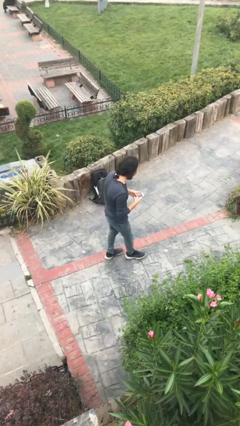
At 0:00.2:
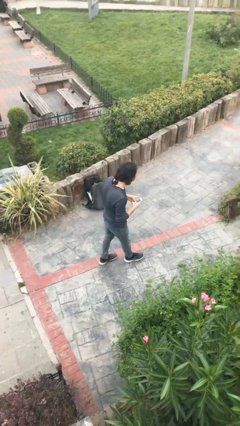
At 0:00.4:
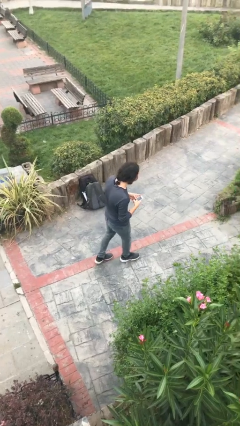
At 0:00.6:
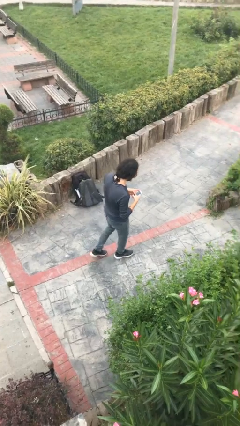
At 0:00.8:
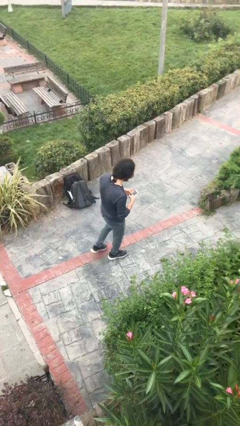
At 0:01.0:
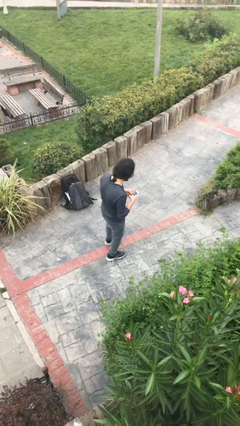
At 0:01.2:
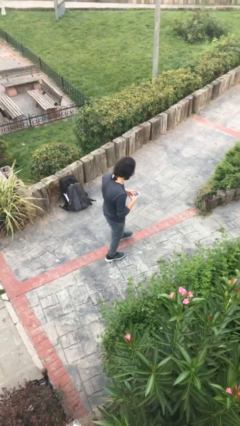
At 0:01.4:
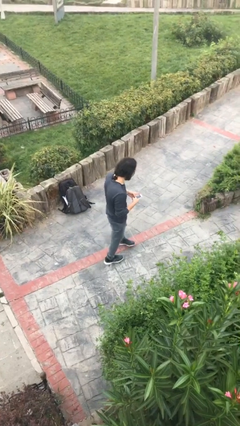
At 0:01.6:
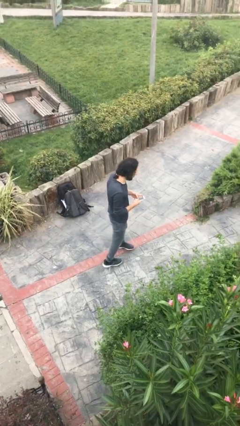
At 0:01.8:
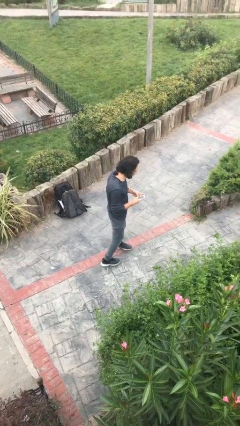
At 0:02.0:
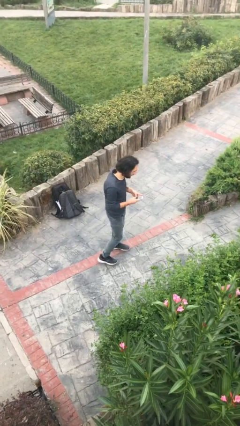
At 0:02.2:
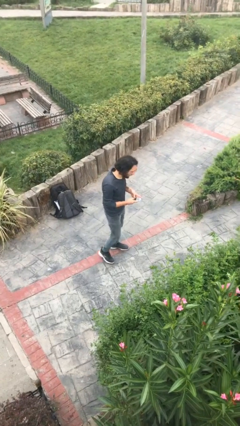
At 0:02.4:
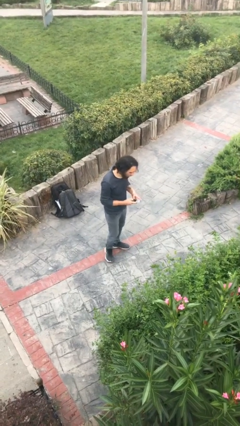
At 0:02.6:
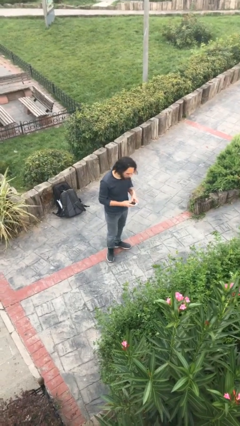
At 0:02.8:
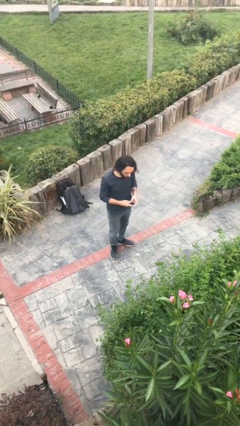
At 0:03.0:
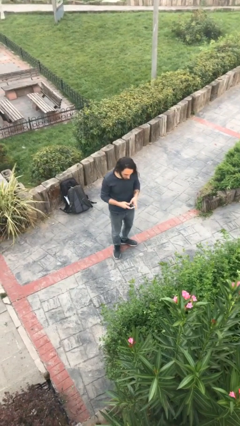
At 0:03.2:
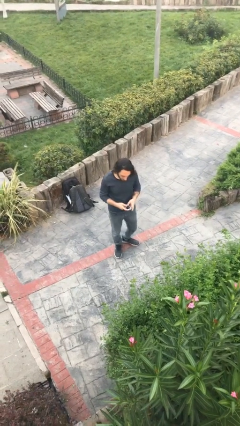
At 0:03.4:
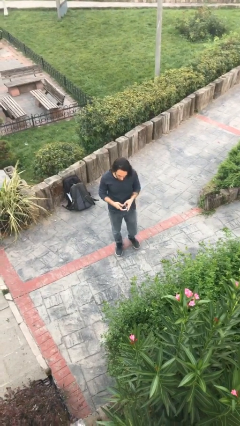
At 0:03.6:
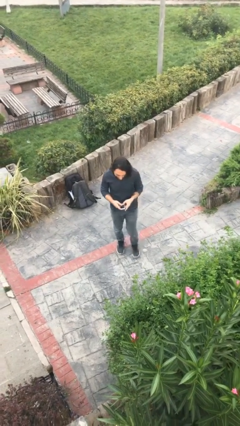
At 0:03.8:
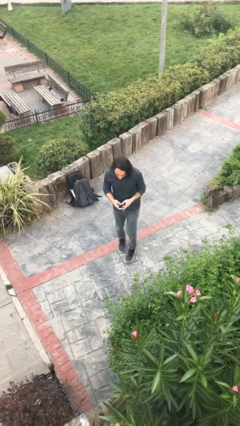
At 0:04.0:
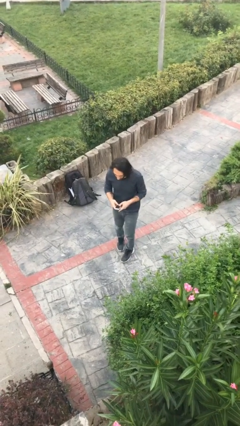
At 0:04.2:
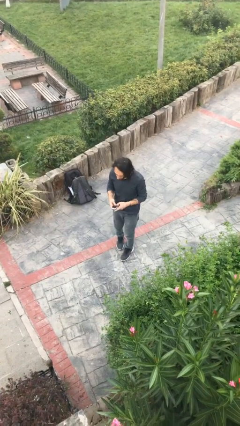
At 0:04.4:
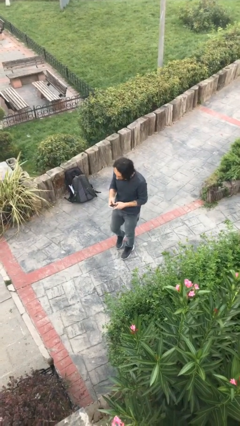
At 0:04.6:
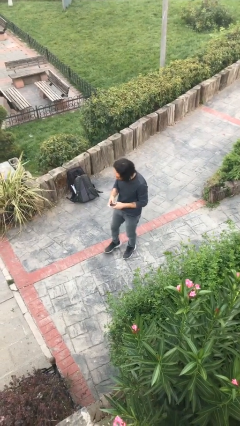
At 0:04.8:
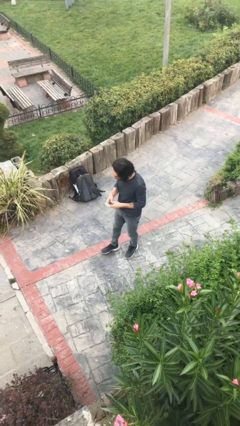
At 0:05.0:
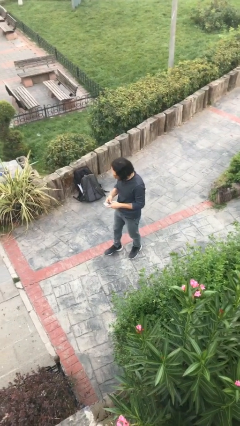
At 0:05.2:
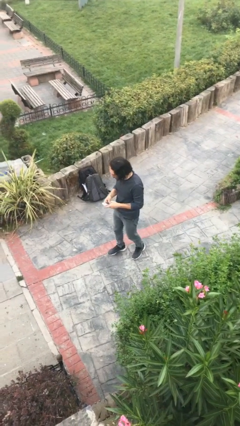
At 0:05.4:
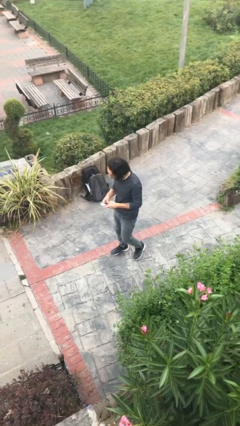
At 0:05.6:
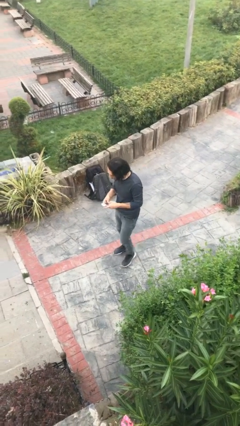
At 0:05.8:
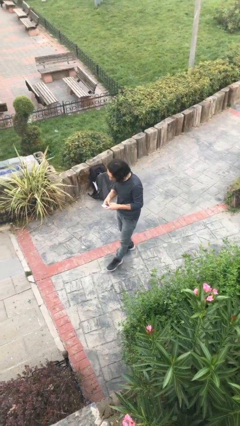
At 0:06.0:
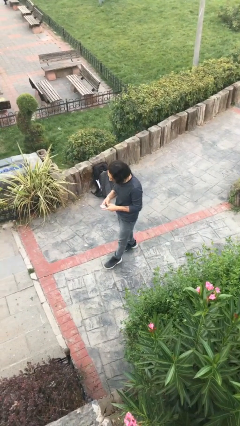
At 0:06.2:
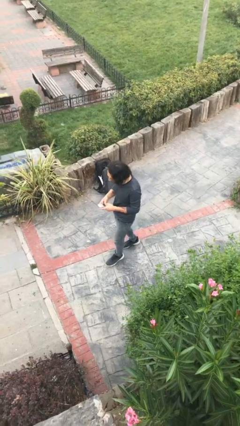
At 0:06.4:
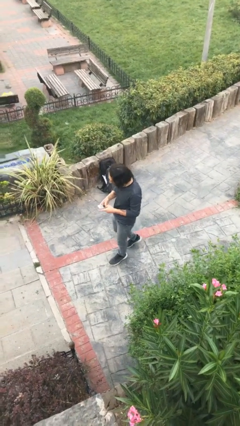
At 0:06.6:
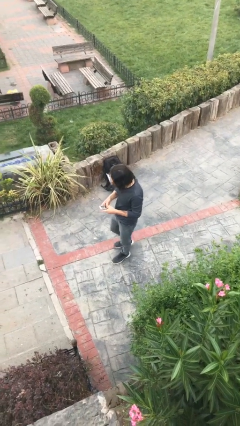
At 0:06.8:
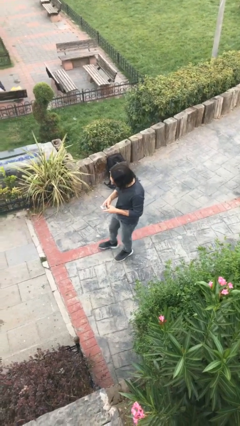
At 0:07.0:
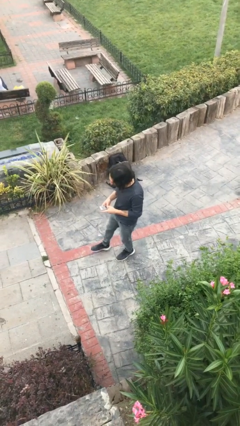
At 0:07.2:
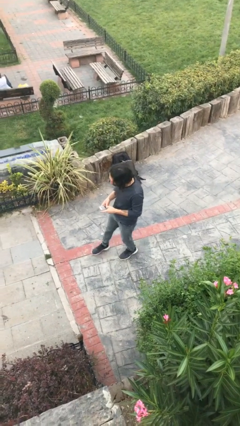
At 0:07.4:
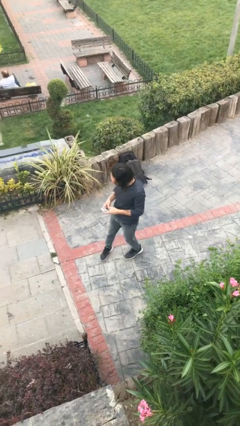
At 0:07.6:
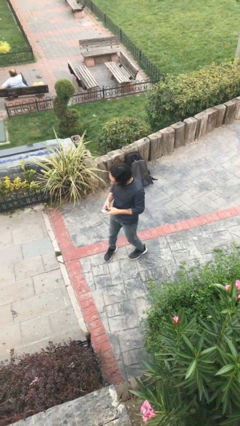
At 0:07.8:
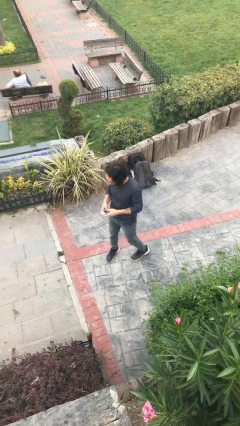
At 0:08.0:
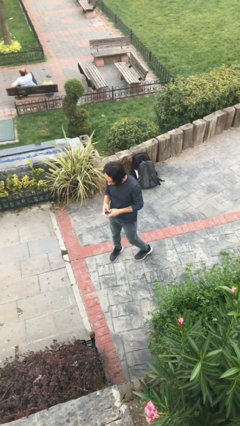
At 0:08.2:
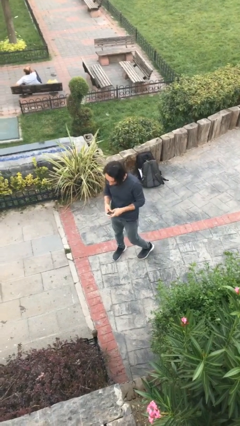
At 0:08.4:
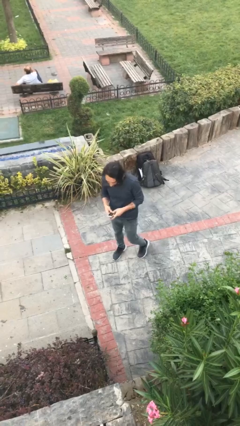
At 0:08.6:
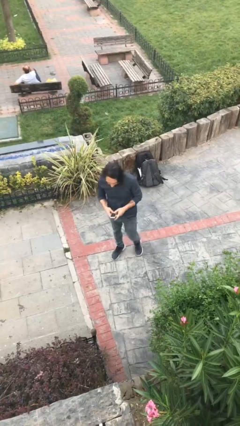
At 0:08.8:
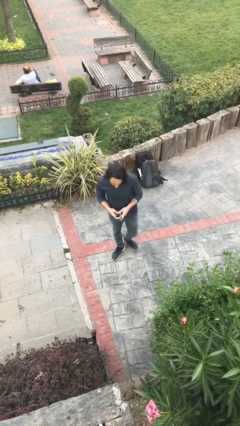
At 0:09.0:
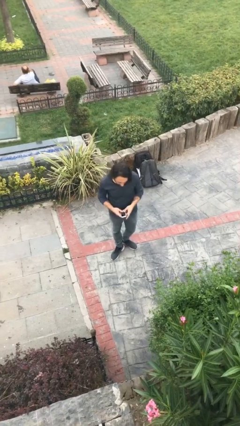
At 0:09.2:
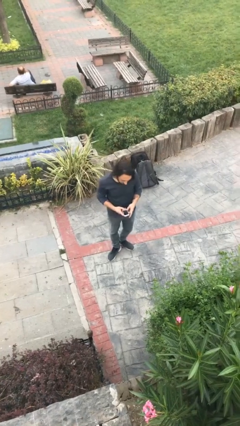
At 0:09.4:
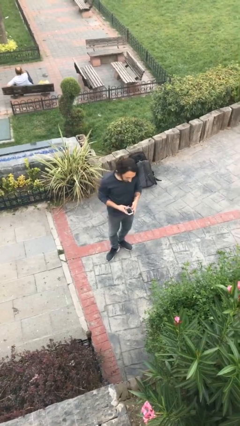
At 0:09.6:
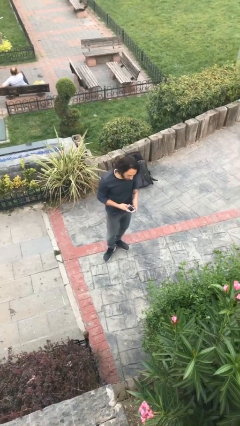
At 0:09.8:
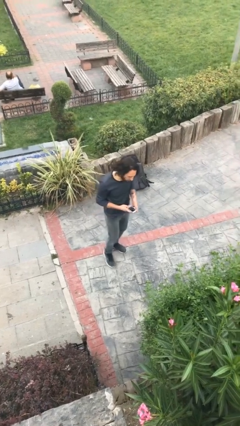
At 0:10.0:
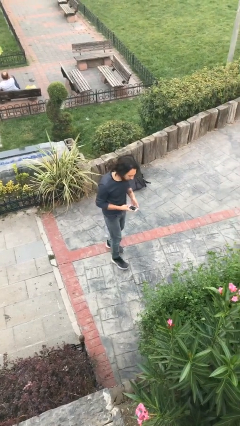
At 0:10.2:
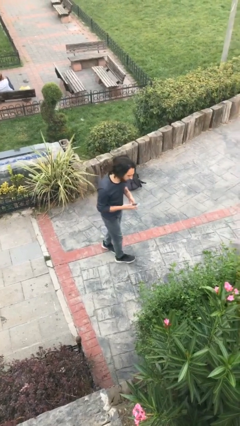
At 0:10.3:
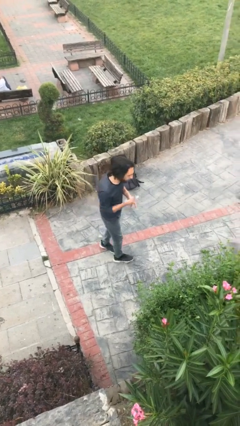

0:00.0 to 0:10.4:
person texts on phone

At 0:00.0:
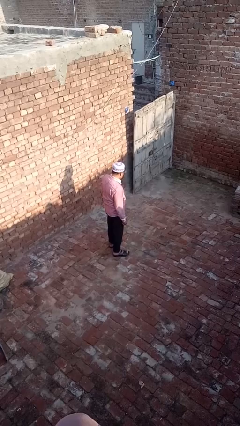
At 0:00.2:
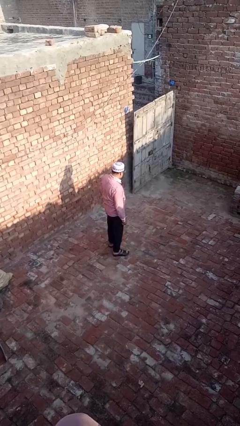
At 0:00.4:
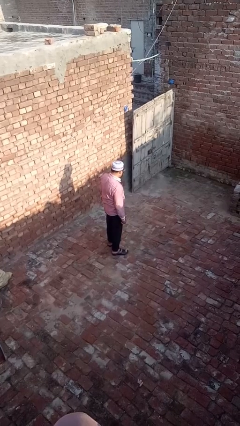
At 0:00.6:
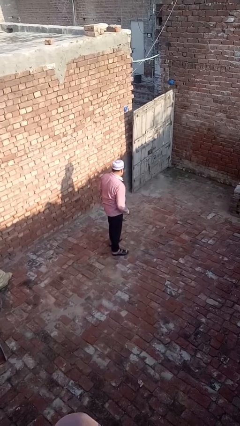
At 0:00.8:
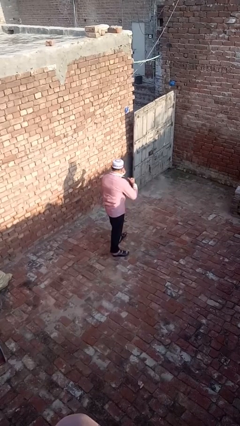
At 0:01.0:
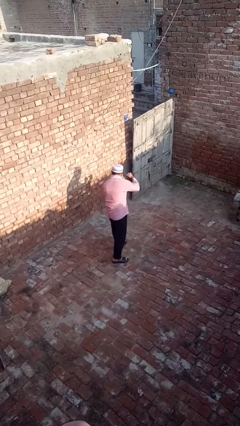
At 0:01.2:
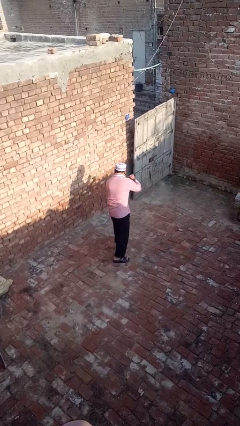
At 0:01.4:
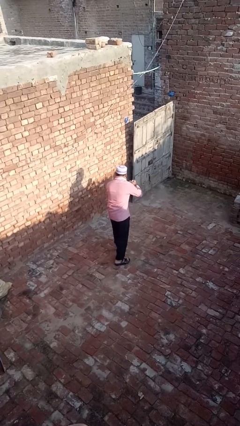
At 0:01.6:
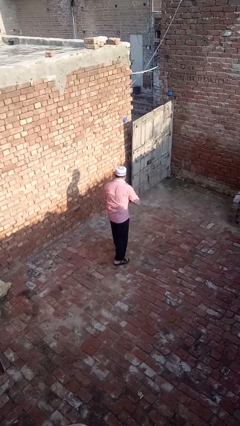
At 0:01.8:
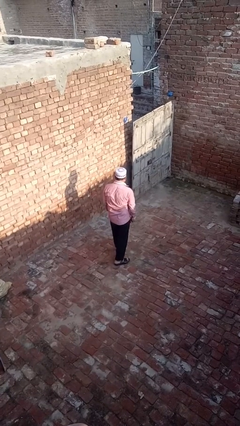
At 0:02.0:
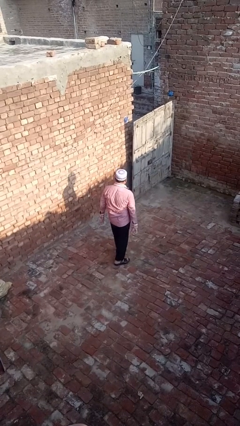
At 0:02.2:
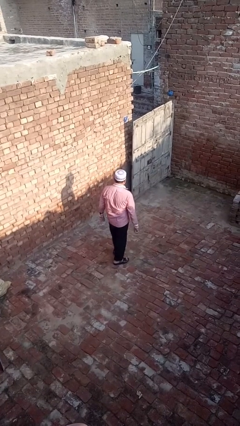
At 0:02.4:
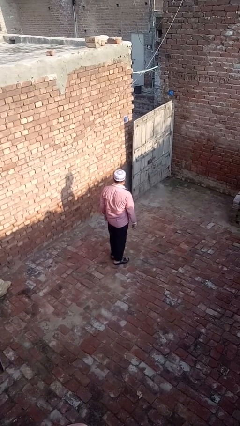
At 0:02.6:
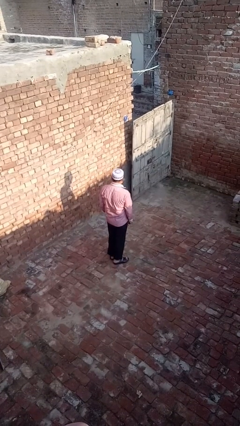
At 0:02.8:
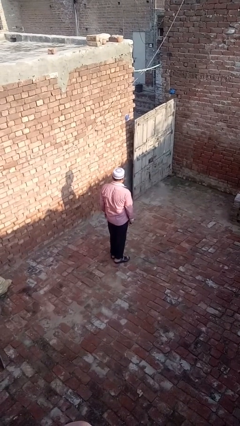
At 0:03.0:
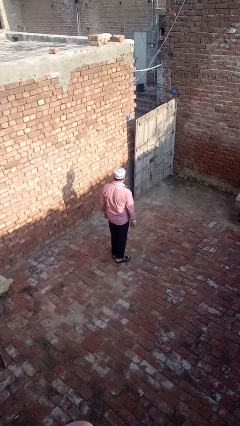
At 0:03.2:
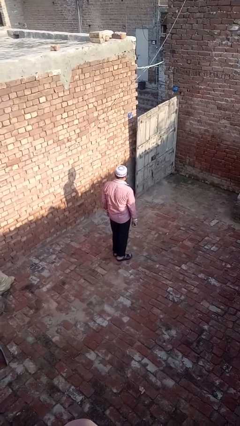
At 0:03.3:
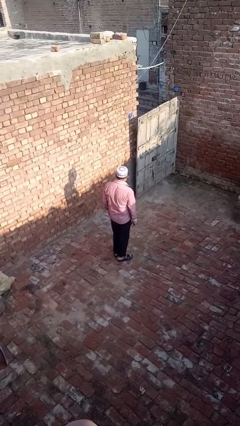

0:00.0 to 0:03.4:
person karate chop

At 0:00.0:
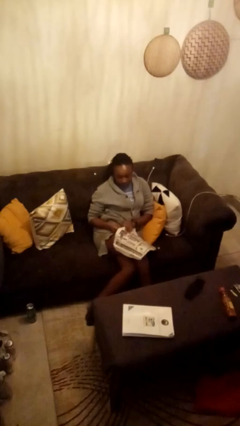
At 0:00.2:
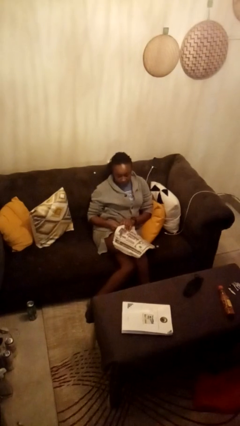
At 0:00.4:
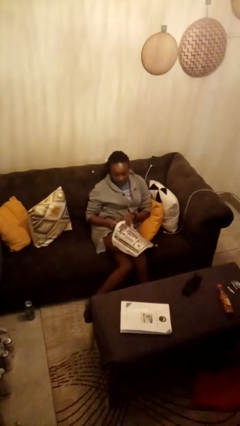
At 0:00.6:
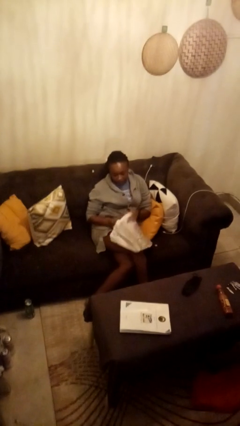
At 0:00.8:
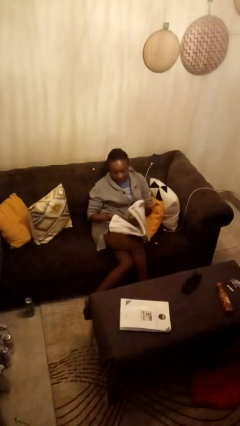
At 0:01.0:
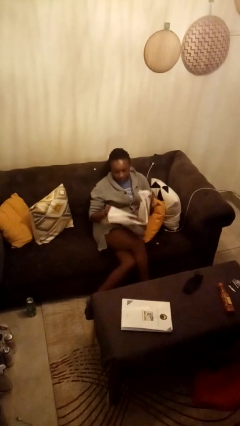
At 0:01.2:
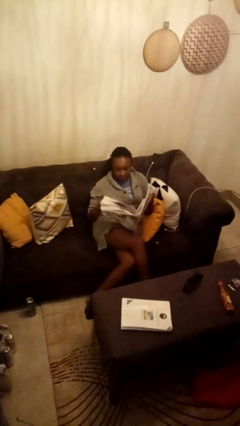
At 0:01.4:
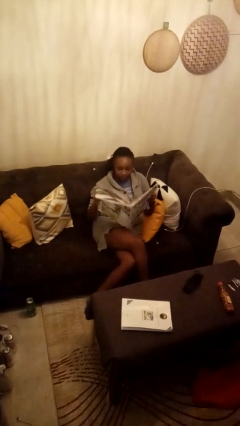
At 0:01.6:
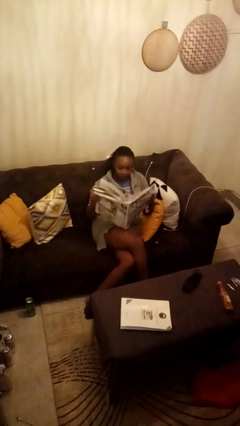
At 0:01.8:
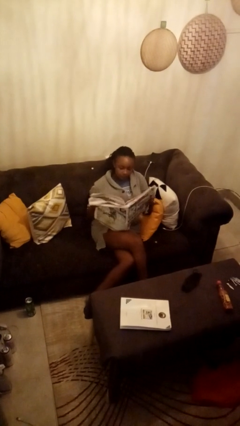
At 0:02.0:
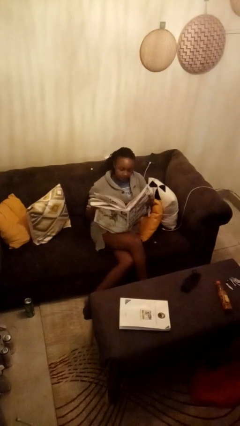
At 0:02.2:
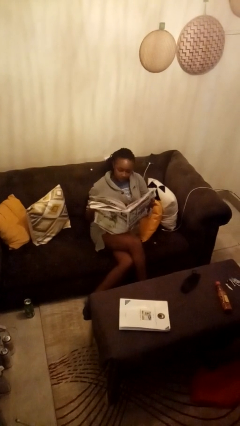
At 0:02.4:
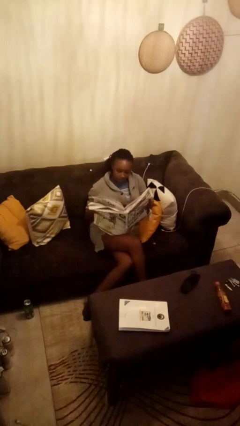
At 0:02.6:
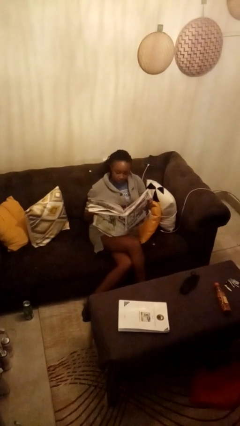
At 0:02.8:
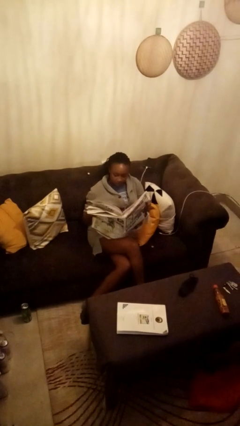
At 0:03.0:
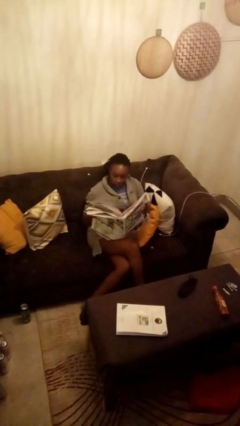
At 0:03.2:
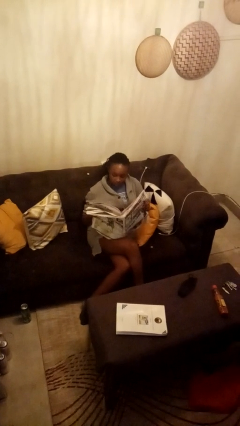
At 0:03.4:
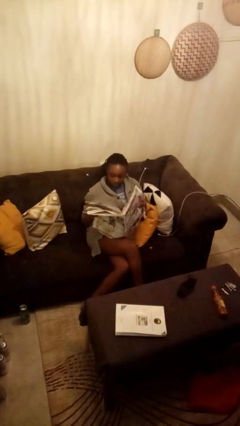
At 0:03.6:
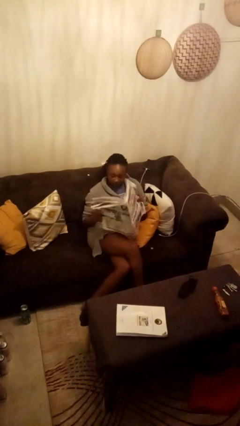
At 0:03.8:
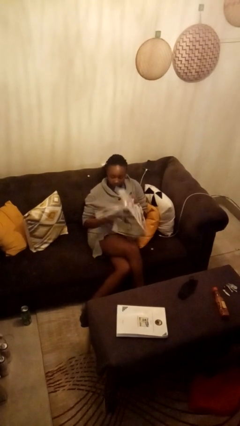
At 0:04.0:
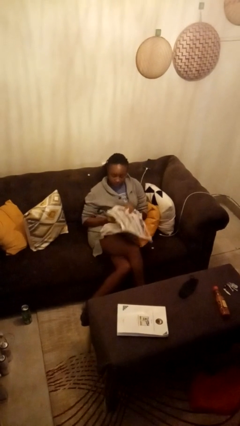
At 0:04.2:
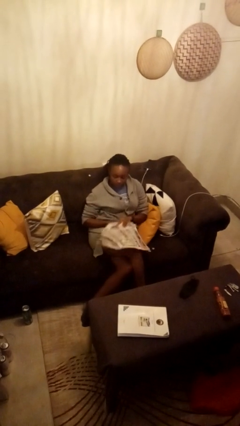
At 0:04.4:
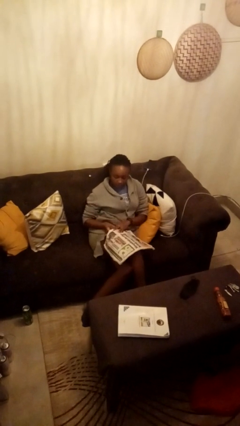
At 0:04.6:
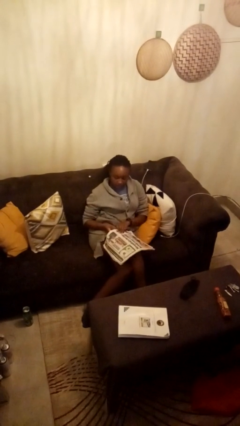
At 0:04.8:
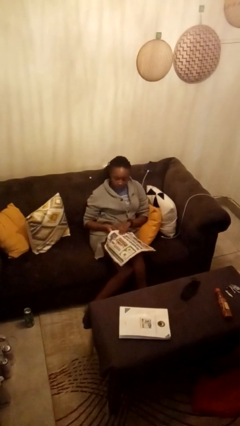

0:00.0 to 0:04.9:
person reads newspaper
